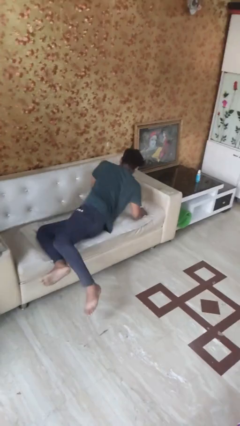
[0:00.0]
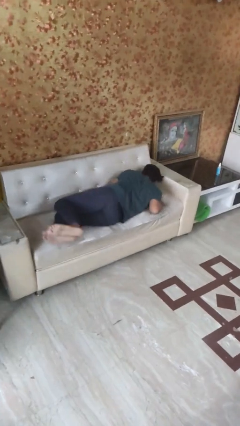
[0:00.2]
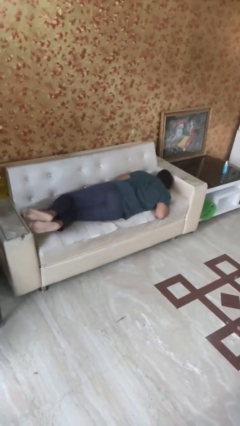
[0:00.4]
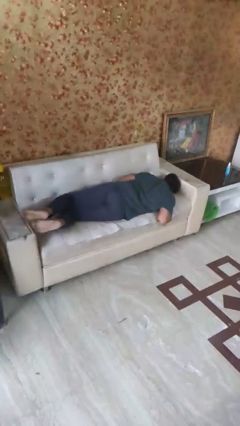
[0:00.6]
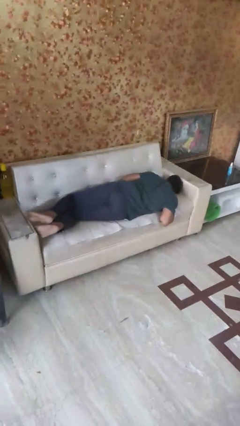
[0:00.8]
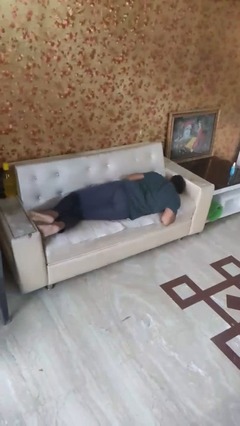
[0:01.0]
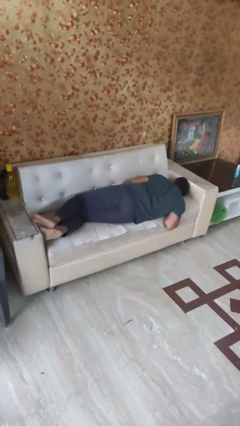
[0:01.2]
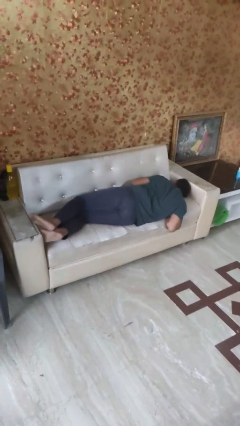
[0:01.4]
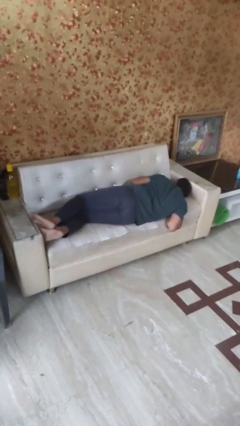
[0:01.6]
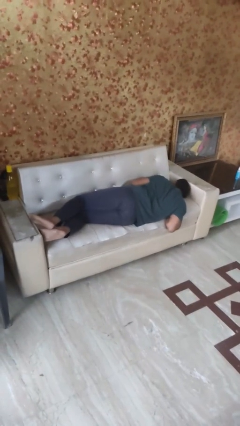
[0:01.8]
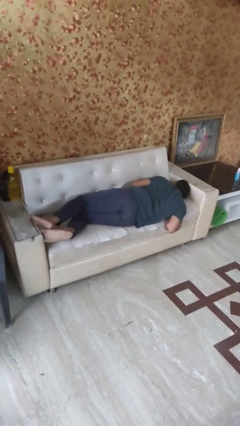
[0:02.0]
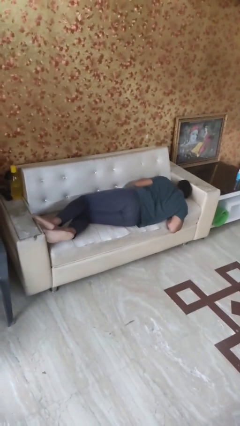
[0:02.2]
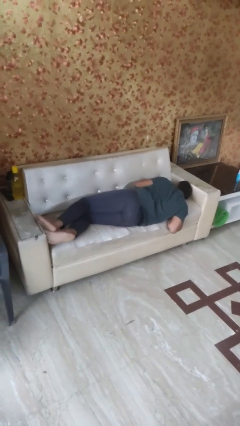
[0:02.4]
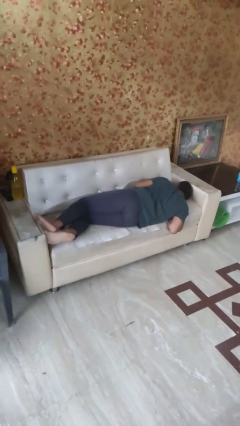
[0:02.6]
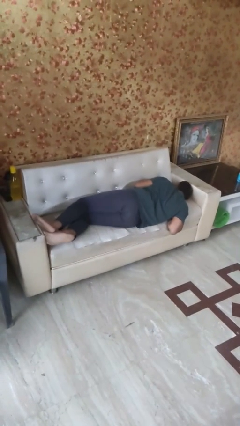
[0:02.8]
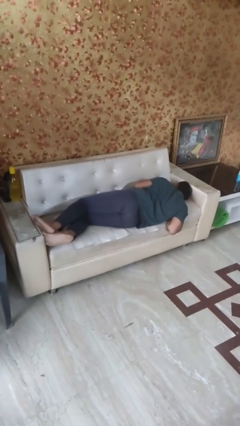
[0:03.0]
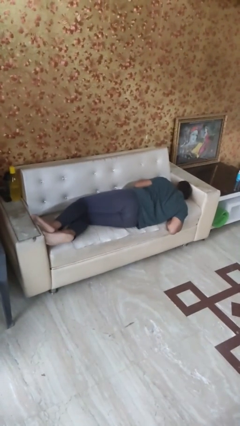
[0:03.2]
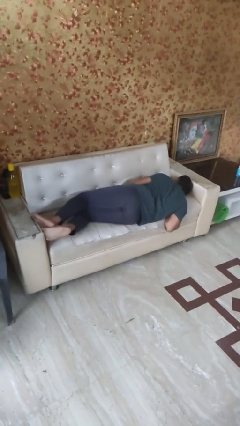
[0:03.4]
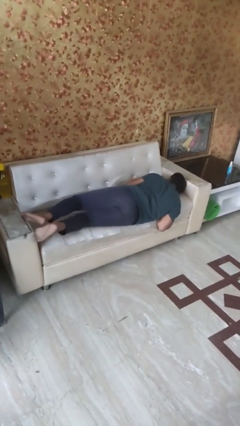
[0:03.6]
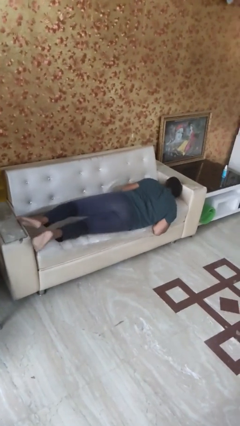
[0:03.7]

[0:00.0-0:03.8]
person lies down on bed

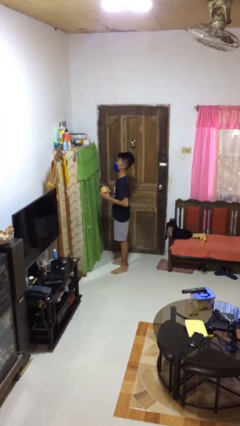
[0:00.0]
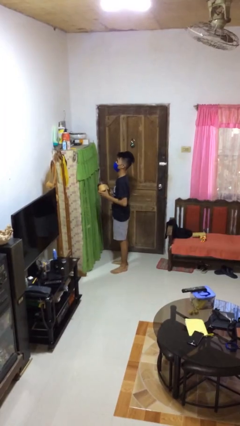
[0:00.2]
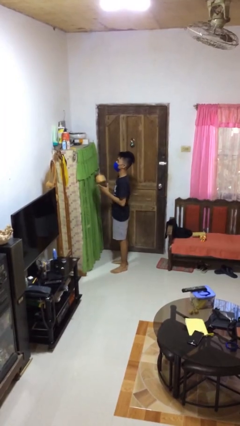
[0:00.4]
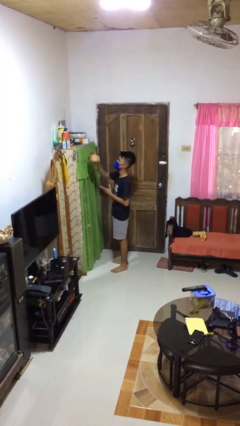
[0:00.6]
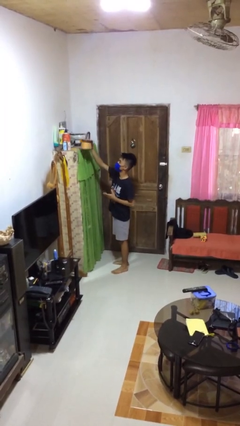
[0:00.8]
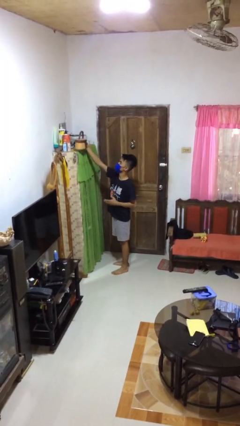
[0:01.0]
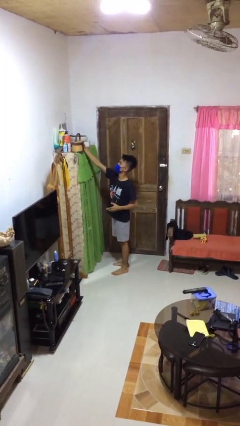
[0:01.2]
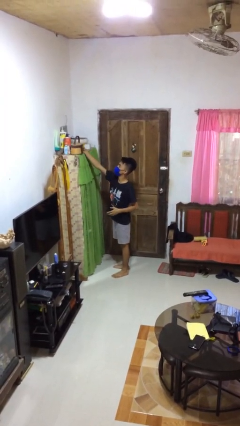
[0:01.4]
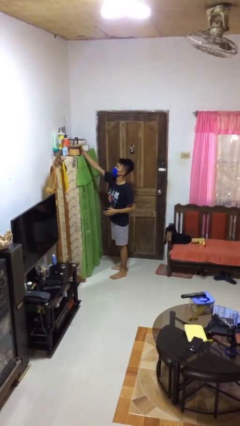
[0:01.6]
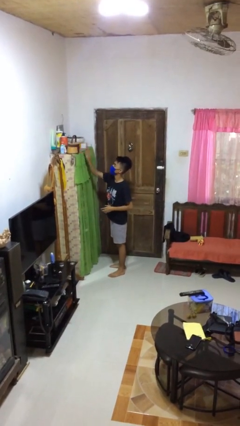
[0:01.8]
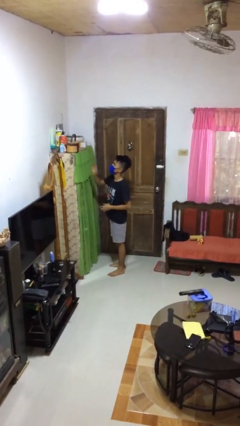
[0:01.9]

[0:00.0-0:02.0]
person puts down object on shelf

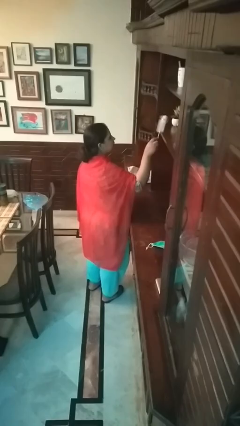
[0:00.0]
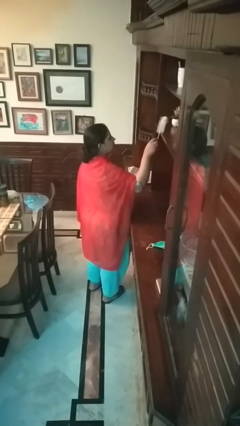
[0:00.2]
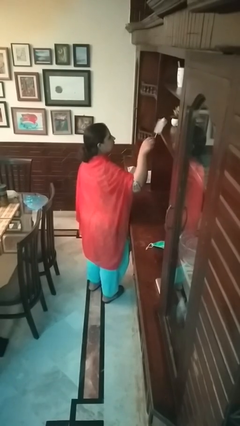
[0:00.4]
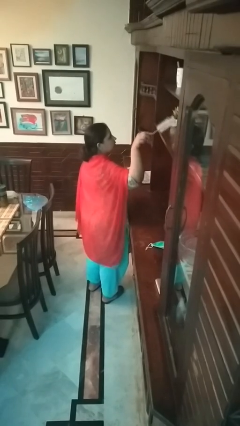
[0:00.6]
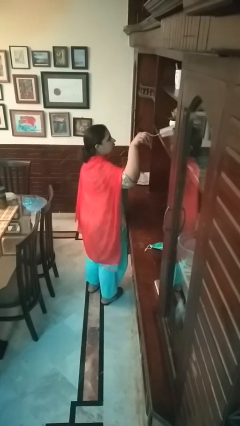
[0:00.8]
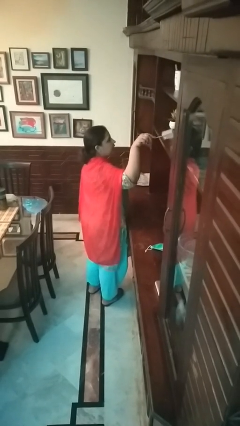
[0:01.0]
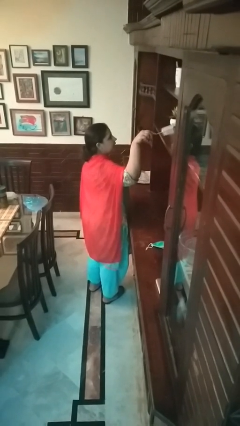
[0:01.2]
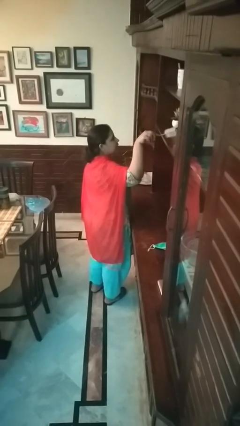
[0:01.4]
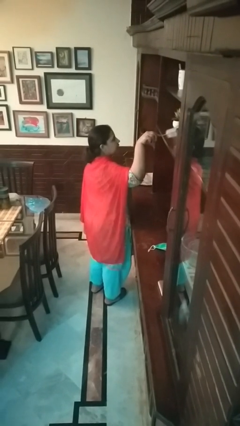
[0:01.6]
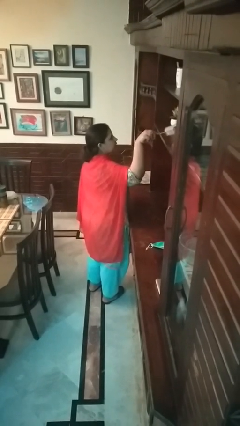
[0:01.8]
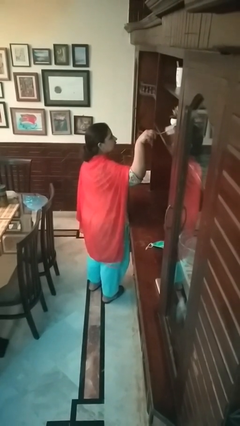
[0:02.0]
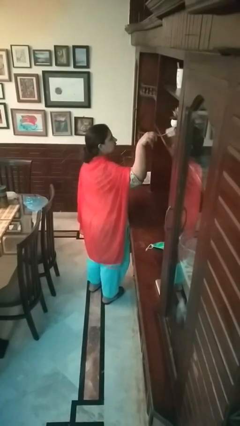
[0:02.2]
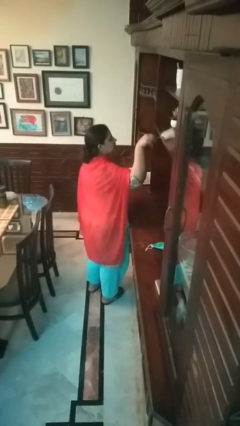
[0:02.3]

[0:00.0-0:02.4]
person dusts furniture

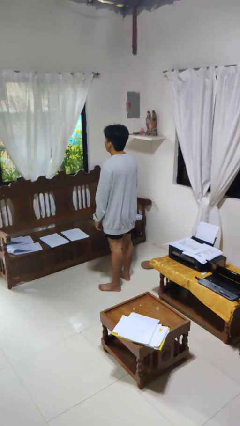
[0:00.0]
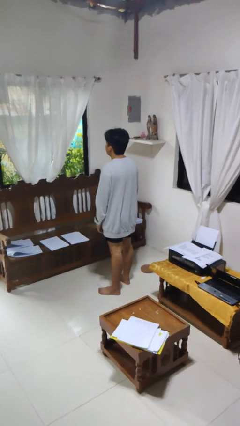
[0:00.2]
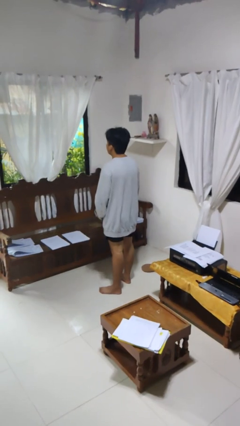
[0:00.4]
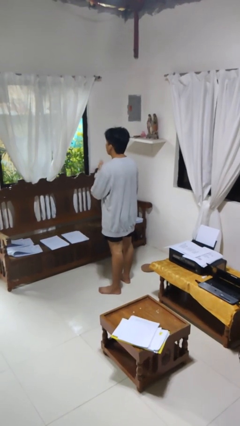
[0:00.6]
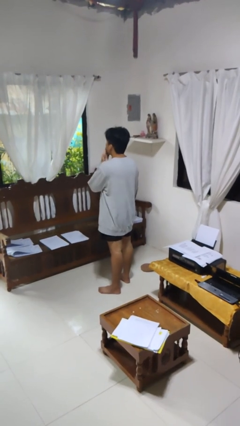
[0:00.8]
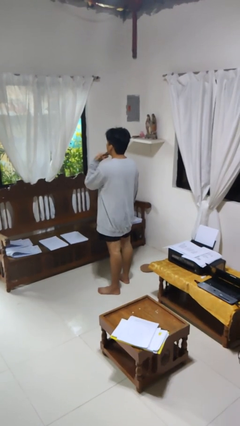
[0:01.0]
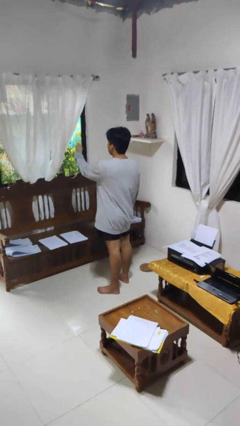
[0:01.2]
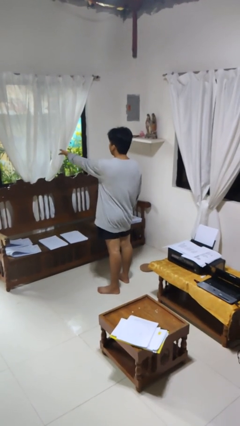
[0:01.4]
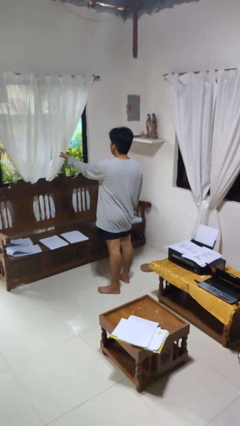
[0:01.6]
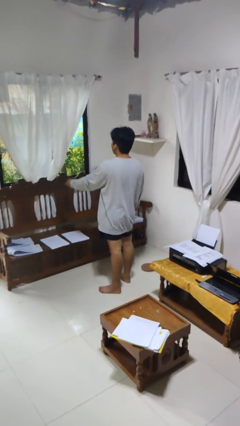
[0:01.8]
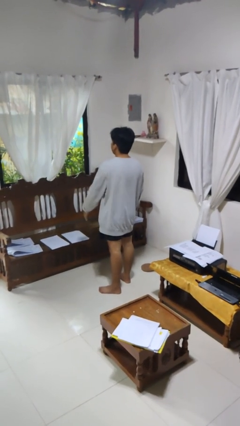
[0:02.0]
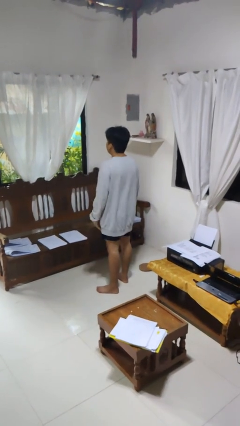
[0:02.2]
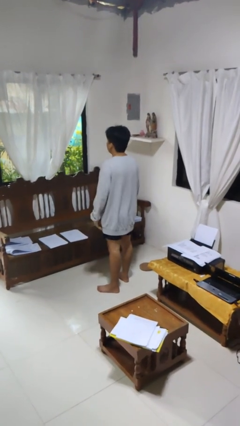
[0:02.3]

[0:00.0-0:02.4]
person gestures blow kiss

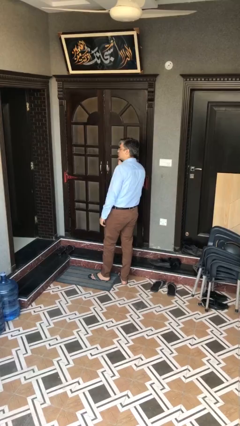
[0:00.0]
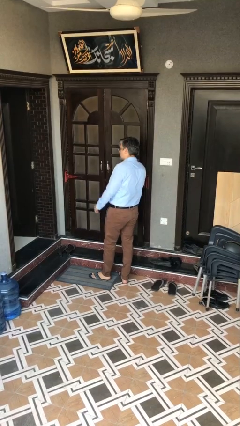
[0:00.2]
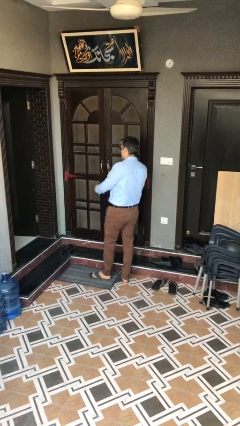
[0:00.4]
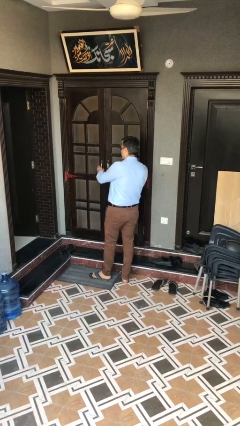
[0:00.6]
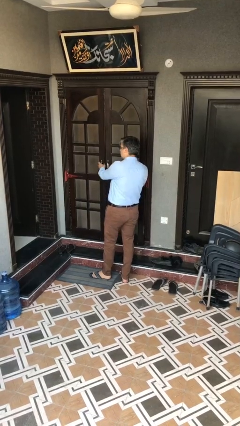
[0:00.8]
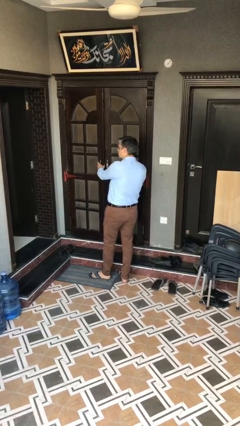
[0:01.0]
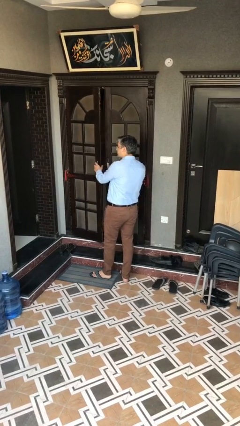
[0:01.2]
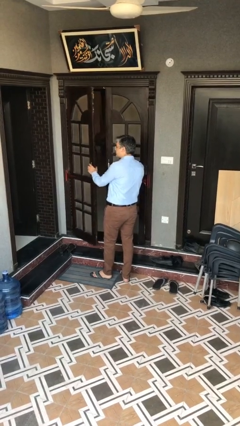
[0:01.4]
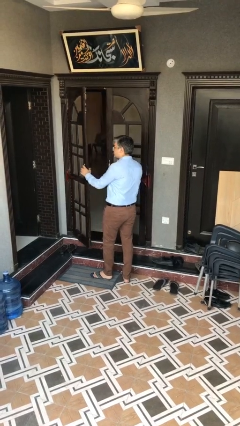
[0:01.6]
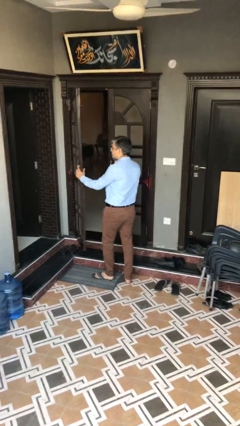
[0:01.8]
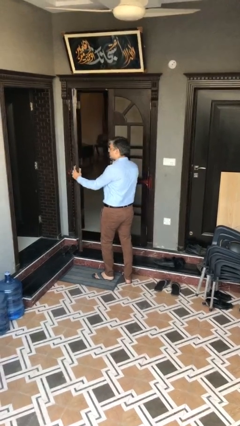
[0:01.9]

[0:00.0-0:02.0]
person opens facility door

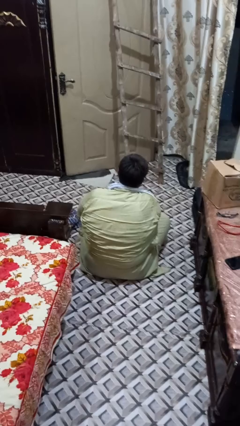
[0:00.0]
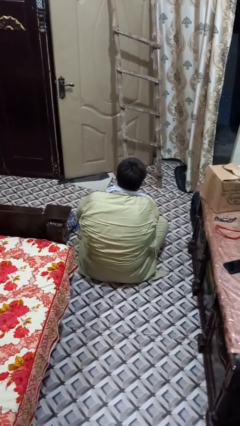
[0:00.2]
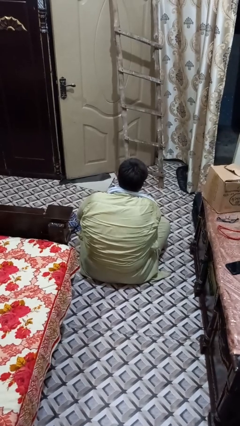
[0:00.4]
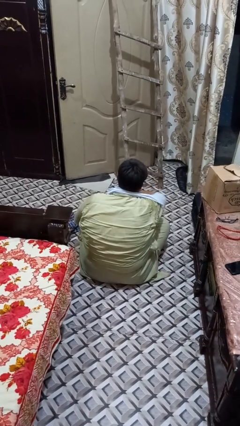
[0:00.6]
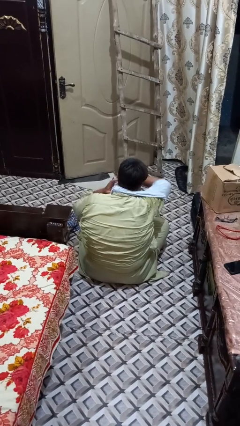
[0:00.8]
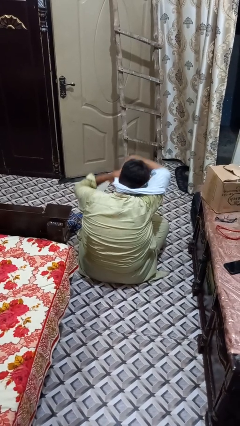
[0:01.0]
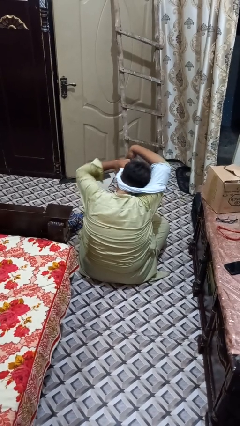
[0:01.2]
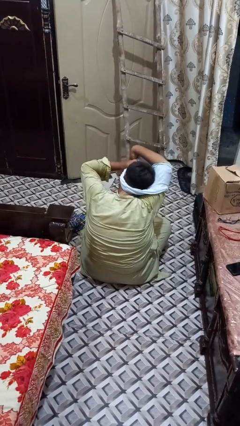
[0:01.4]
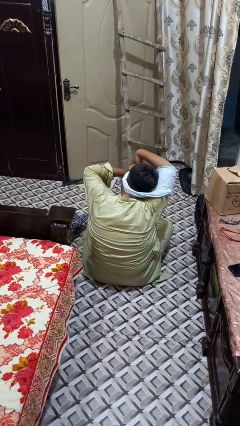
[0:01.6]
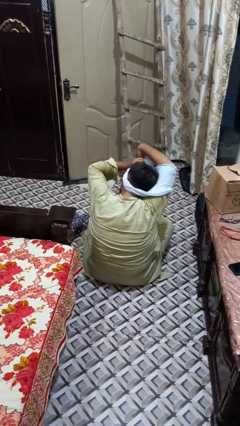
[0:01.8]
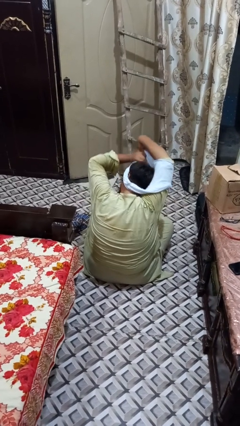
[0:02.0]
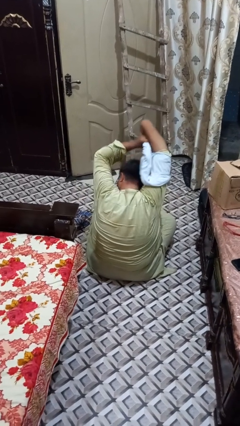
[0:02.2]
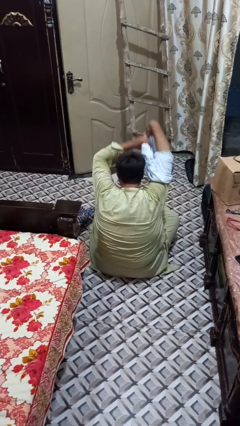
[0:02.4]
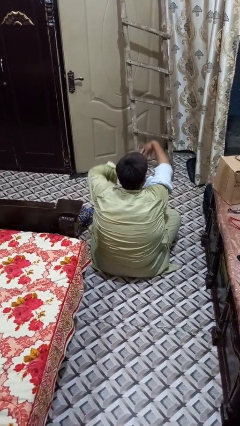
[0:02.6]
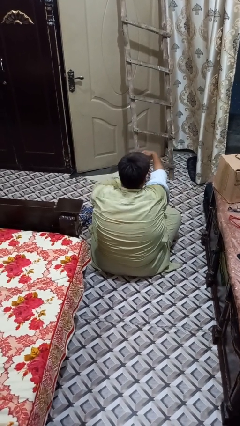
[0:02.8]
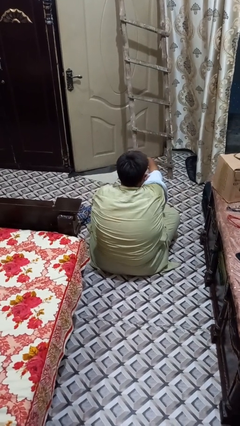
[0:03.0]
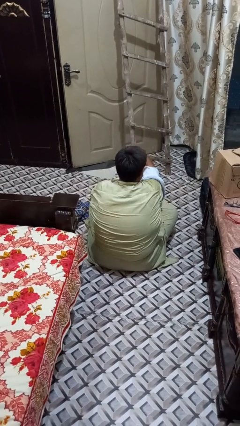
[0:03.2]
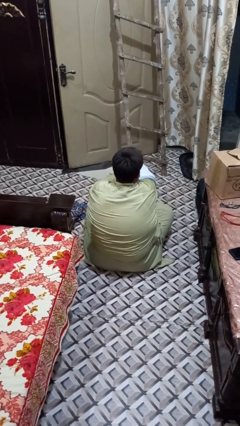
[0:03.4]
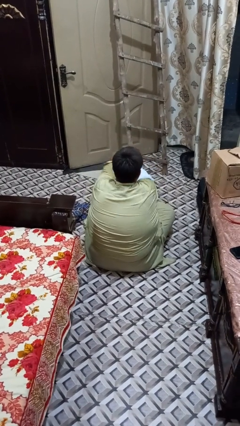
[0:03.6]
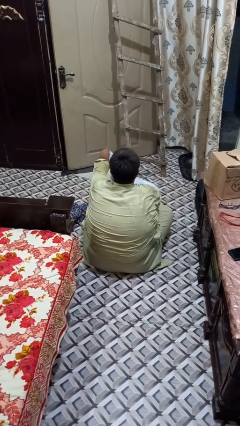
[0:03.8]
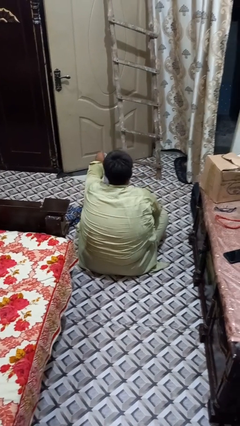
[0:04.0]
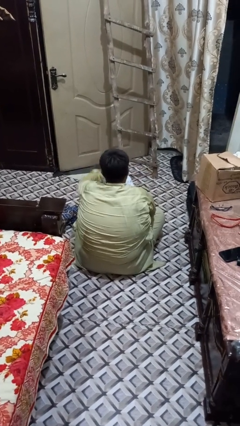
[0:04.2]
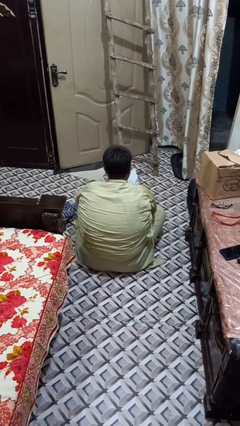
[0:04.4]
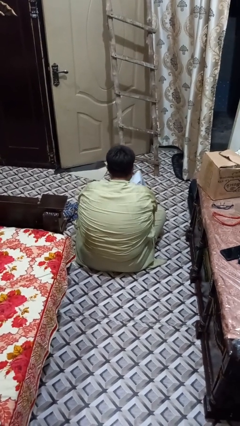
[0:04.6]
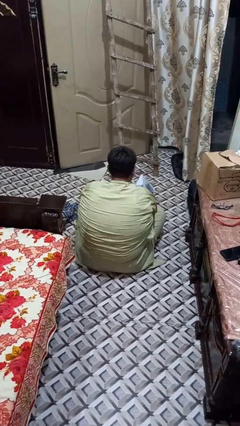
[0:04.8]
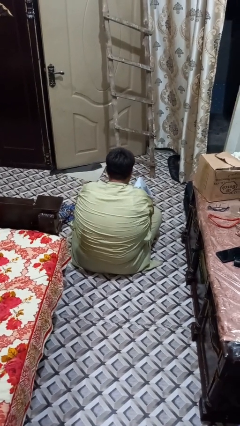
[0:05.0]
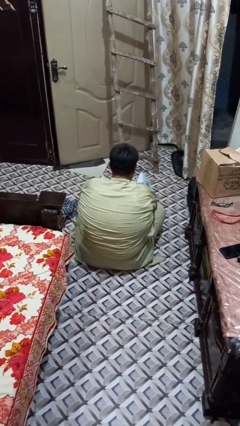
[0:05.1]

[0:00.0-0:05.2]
person takes off shirt
